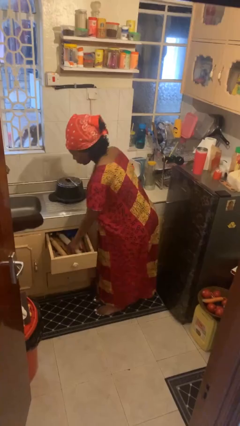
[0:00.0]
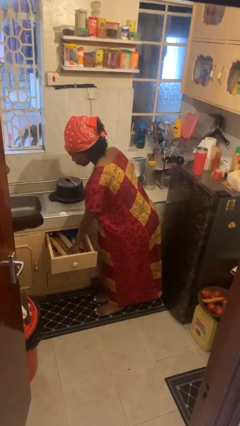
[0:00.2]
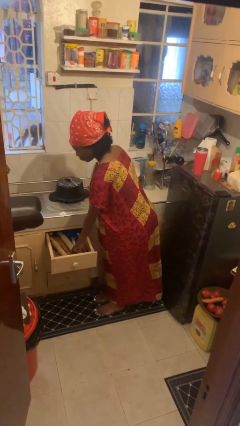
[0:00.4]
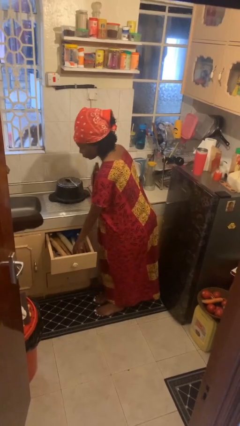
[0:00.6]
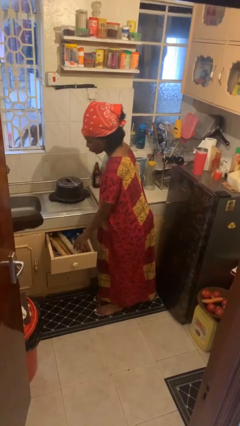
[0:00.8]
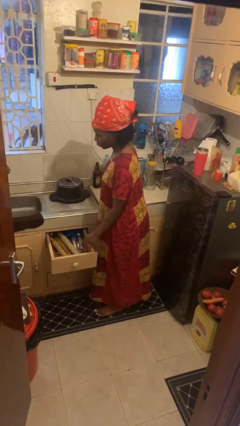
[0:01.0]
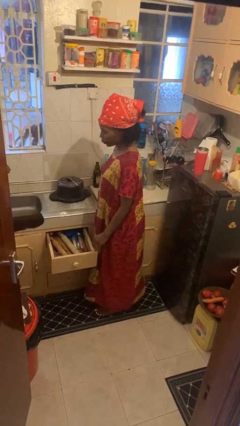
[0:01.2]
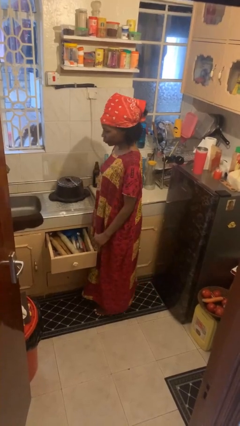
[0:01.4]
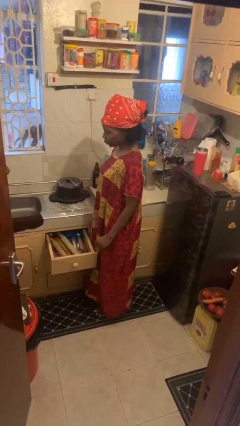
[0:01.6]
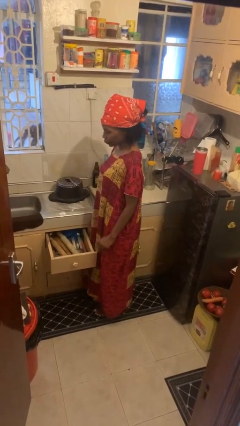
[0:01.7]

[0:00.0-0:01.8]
person puts object into kitchen drawer

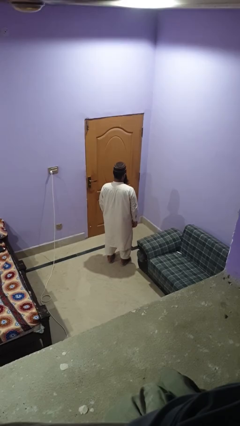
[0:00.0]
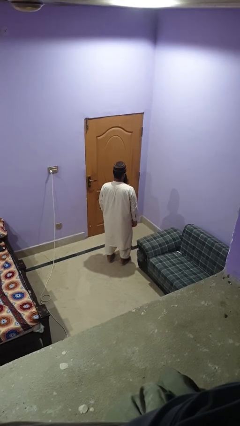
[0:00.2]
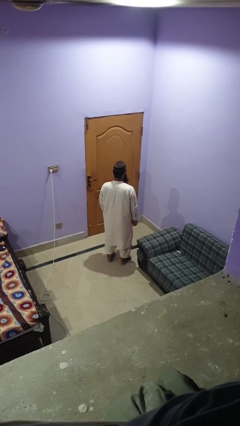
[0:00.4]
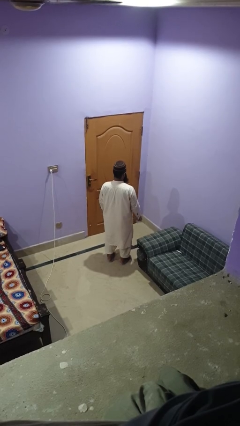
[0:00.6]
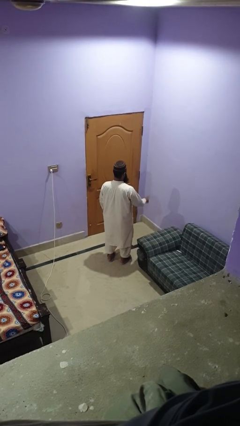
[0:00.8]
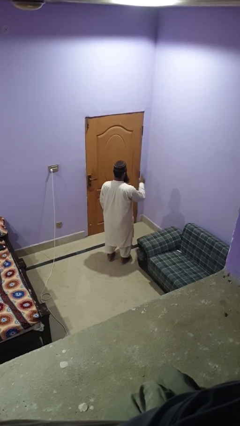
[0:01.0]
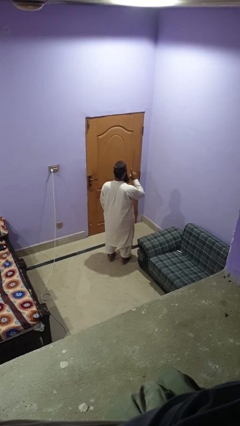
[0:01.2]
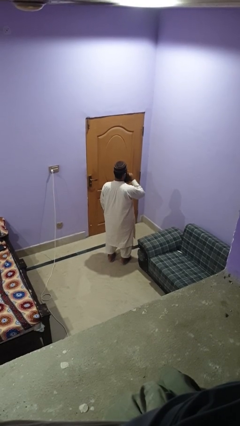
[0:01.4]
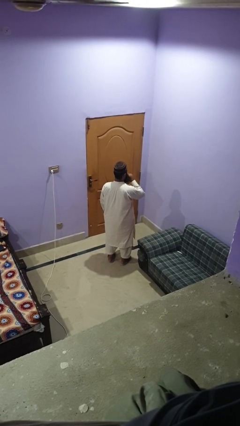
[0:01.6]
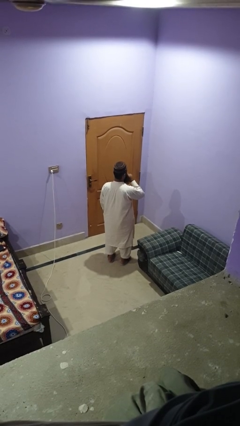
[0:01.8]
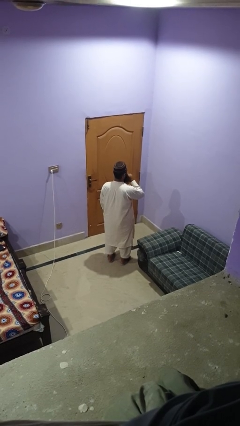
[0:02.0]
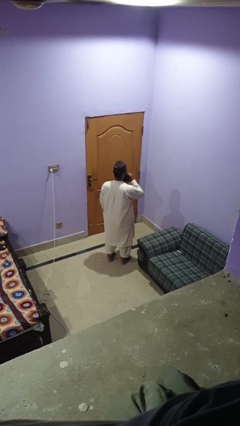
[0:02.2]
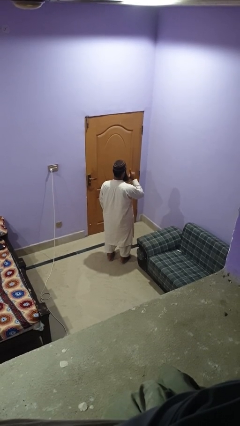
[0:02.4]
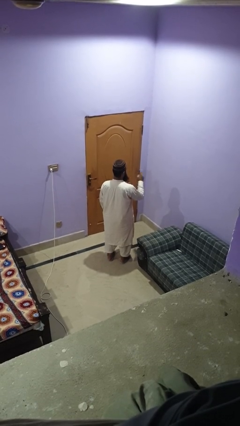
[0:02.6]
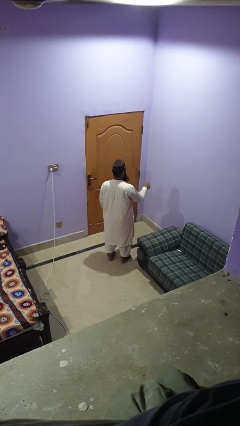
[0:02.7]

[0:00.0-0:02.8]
person gestures be quiet

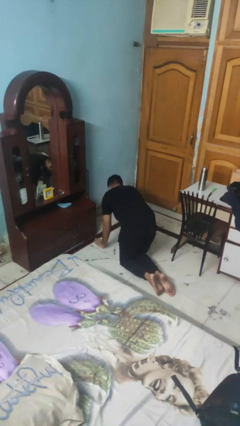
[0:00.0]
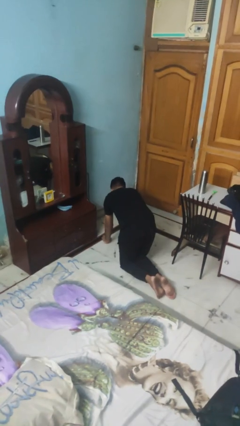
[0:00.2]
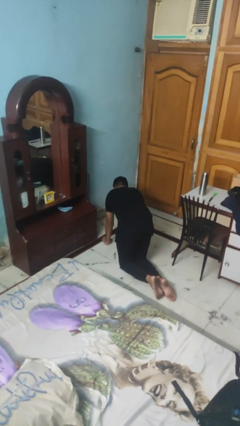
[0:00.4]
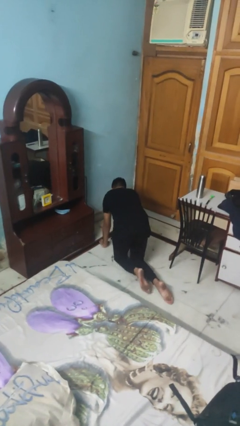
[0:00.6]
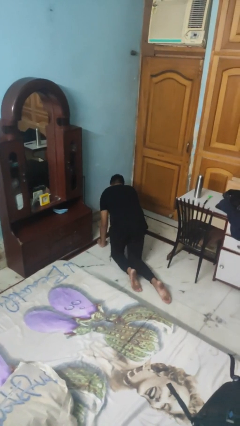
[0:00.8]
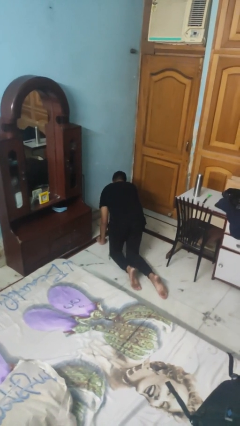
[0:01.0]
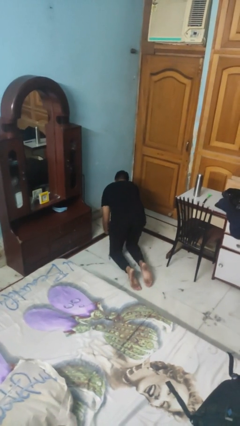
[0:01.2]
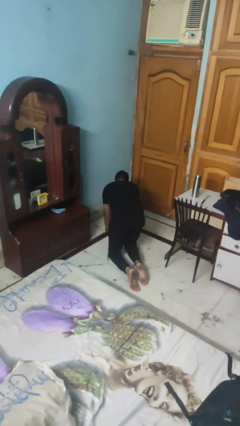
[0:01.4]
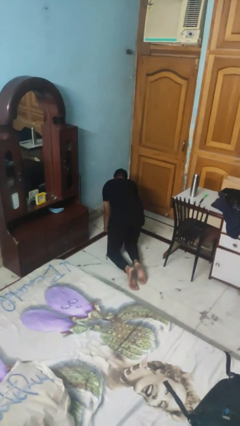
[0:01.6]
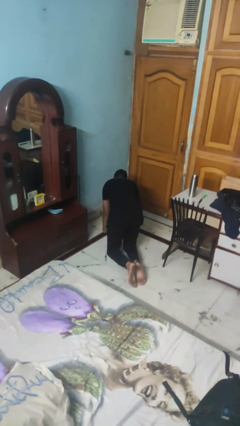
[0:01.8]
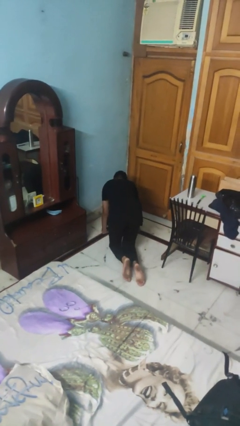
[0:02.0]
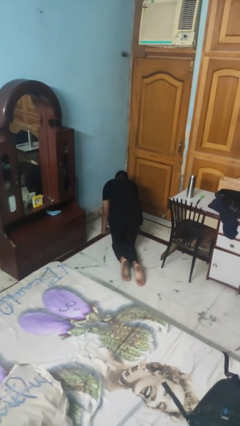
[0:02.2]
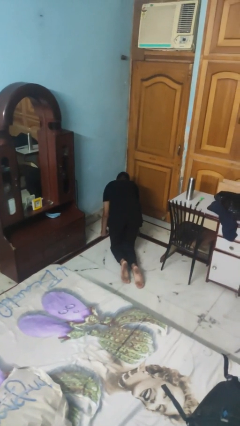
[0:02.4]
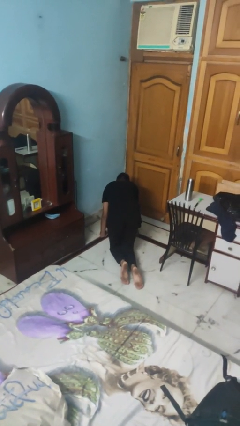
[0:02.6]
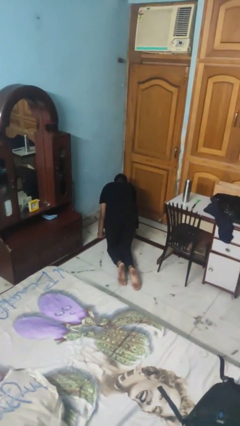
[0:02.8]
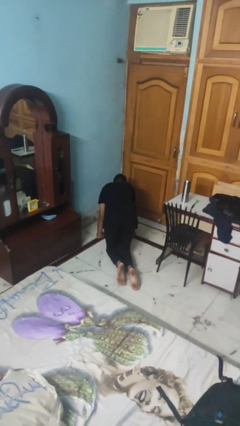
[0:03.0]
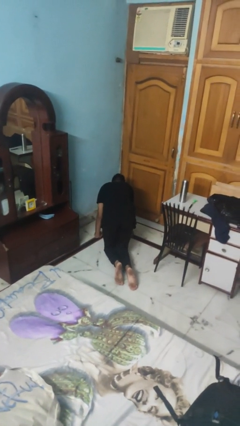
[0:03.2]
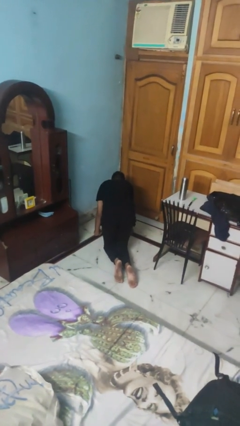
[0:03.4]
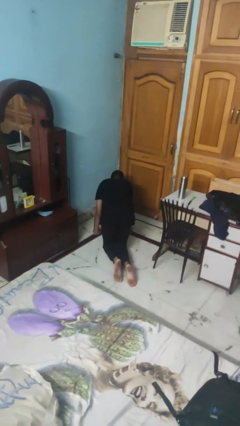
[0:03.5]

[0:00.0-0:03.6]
person crawls

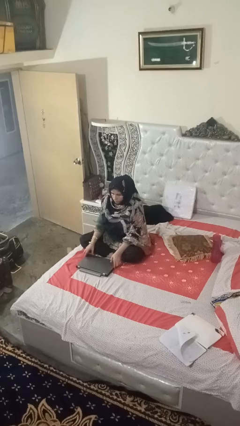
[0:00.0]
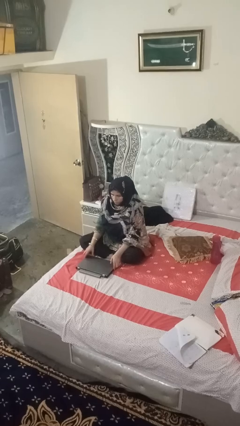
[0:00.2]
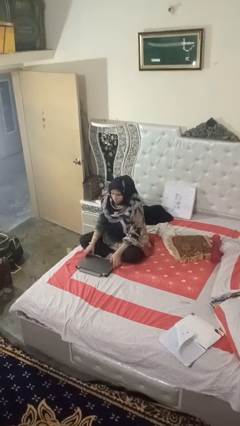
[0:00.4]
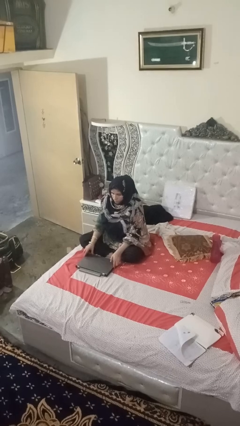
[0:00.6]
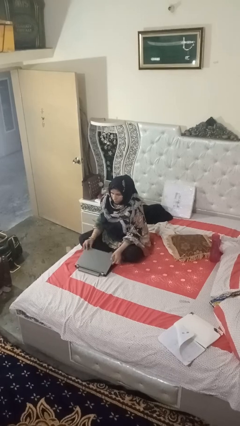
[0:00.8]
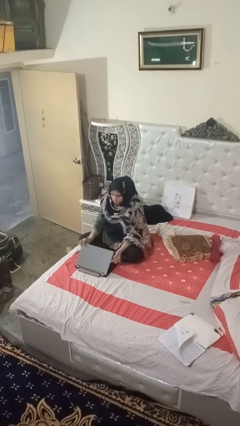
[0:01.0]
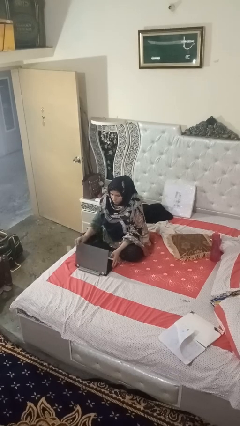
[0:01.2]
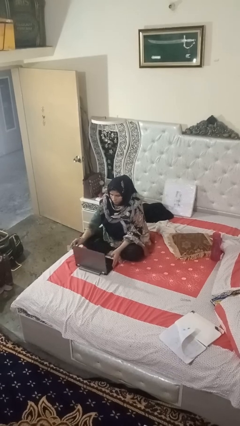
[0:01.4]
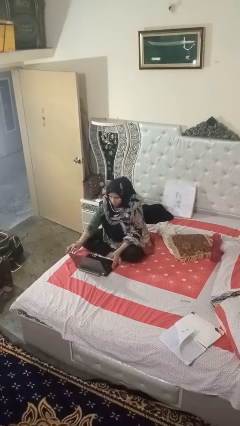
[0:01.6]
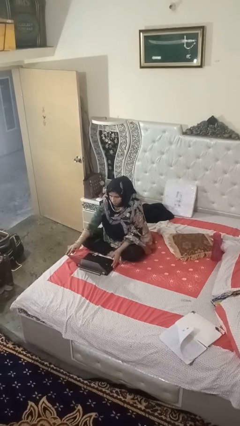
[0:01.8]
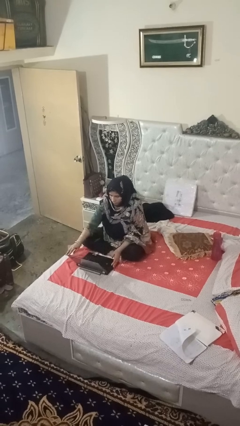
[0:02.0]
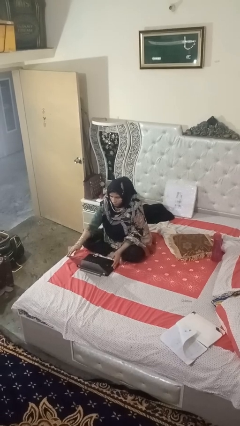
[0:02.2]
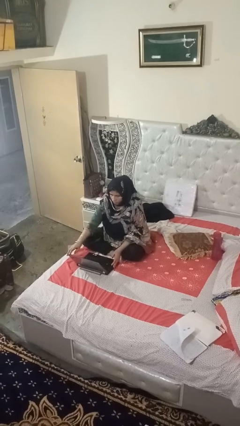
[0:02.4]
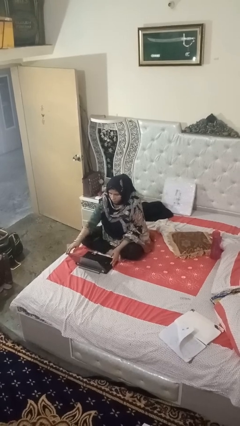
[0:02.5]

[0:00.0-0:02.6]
person opens laptop

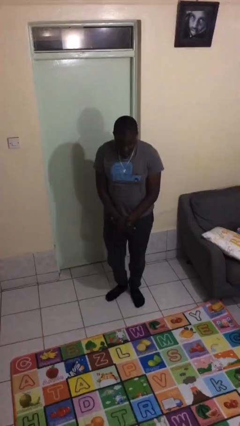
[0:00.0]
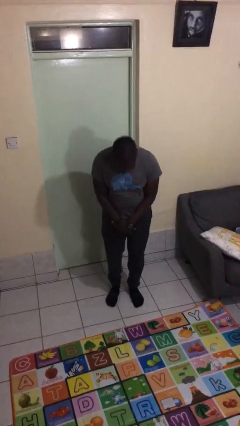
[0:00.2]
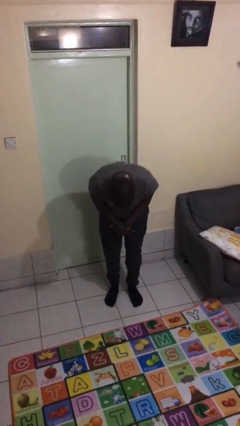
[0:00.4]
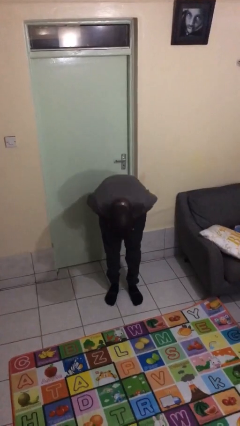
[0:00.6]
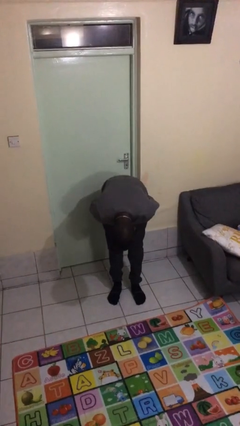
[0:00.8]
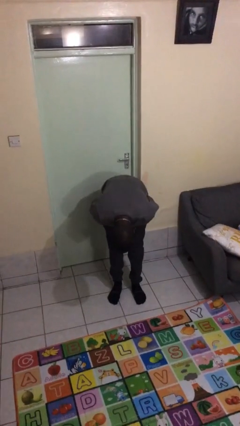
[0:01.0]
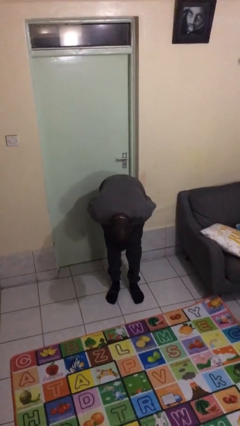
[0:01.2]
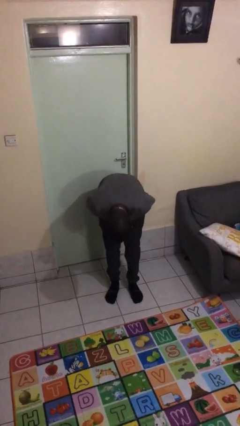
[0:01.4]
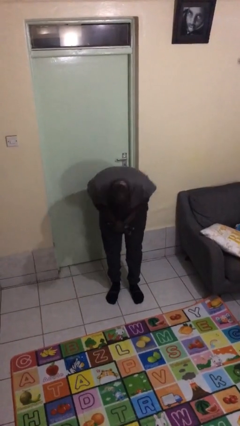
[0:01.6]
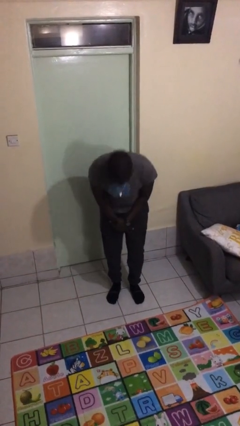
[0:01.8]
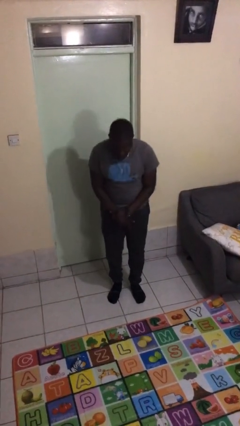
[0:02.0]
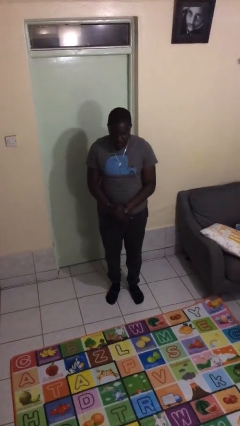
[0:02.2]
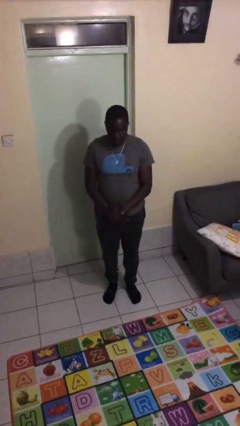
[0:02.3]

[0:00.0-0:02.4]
person bows

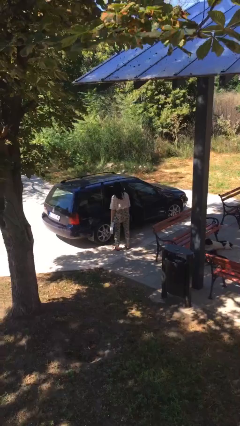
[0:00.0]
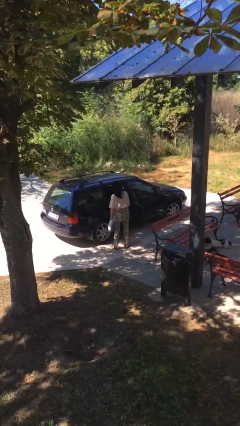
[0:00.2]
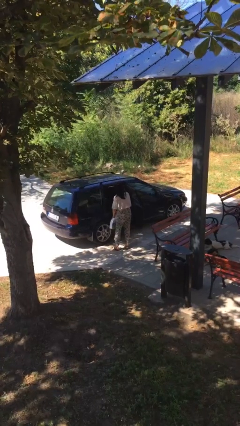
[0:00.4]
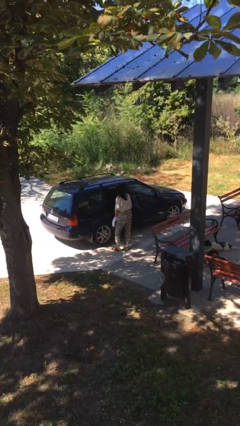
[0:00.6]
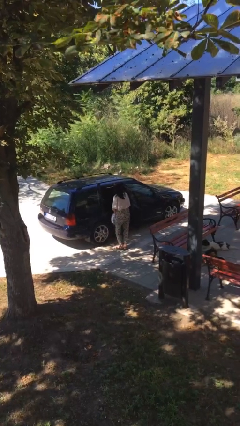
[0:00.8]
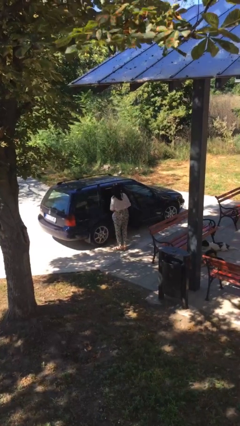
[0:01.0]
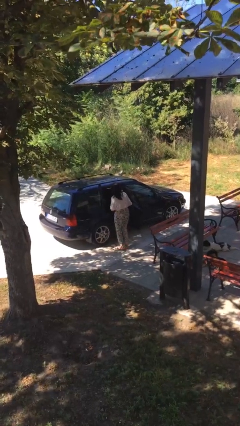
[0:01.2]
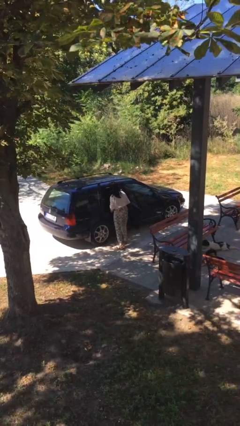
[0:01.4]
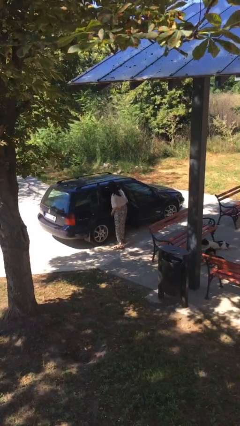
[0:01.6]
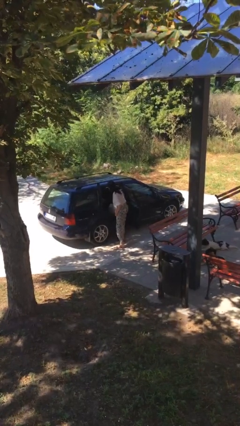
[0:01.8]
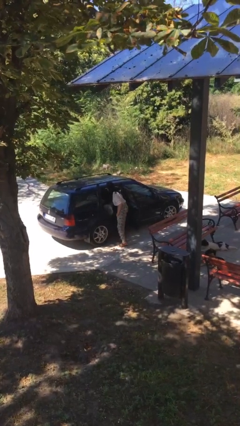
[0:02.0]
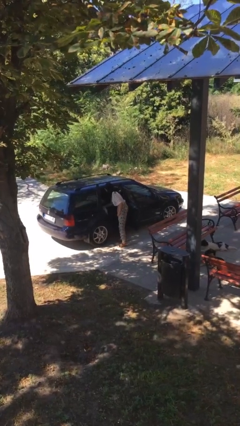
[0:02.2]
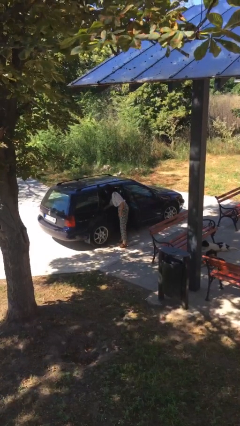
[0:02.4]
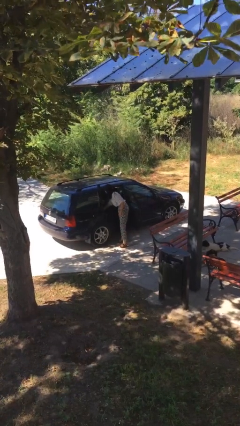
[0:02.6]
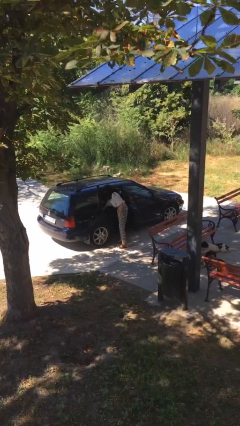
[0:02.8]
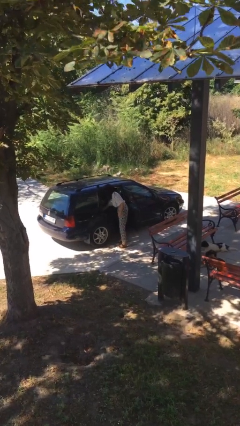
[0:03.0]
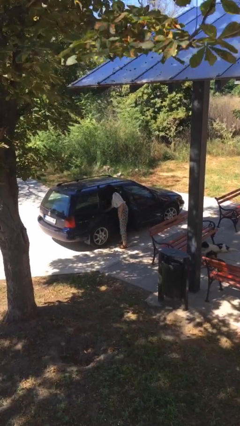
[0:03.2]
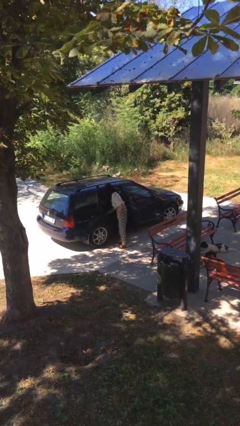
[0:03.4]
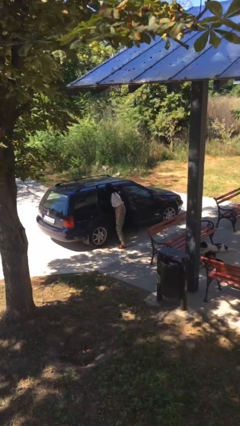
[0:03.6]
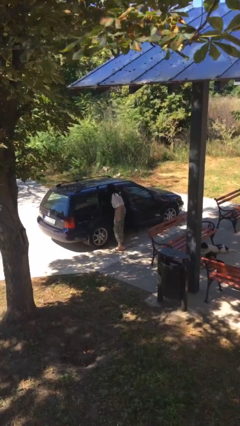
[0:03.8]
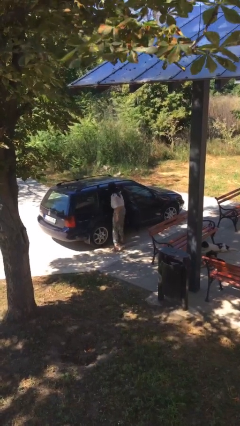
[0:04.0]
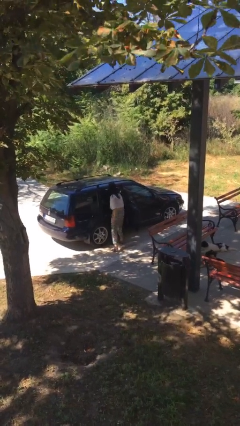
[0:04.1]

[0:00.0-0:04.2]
person loads car
